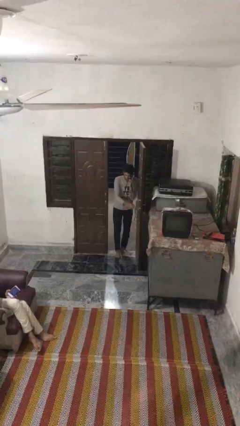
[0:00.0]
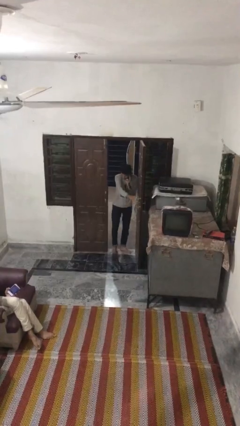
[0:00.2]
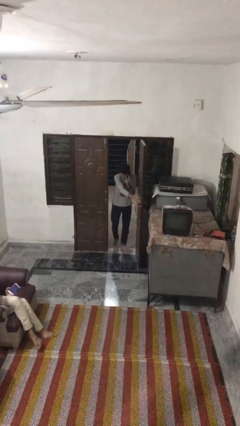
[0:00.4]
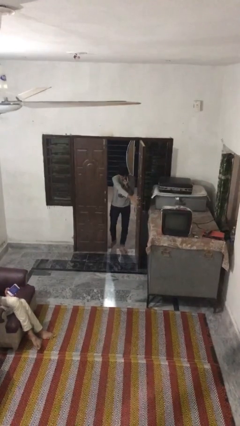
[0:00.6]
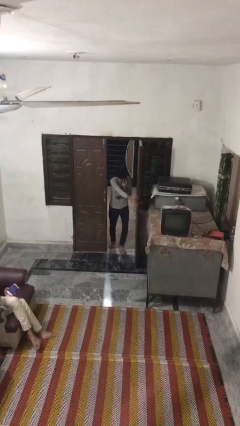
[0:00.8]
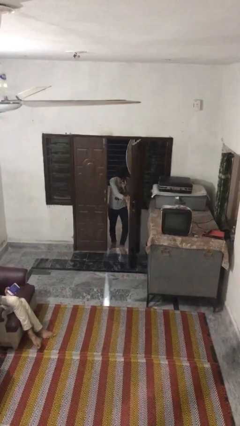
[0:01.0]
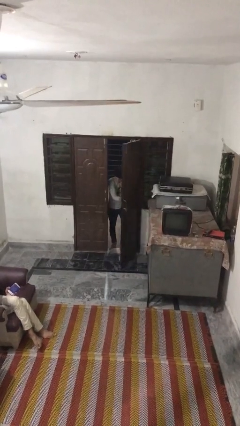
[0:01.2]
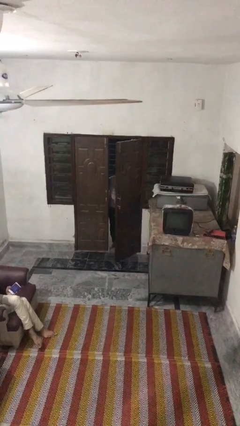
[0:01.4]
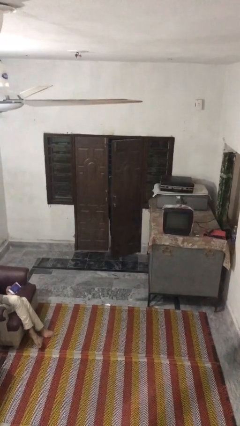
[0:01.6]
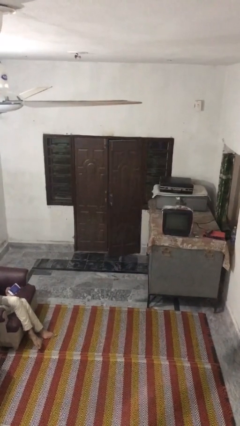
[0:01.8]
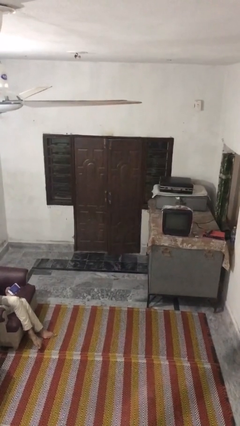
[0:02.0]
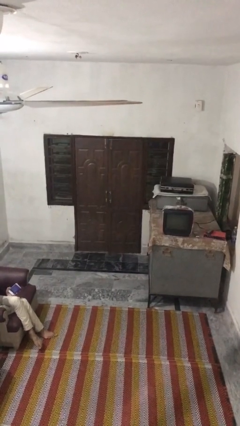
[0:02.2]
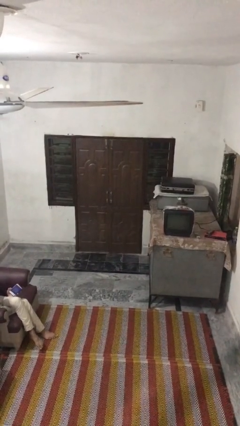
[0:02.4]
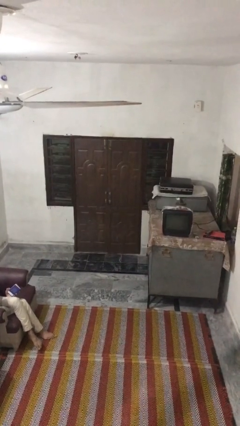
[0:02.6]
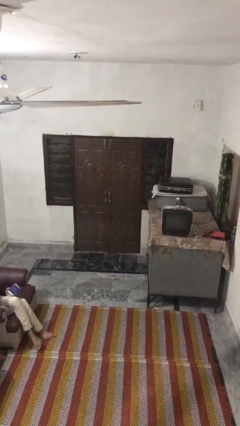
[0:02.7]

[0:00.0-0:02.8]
person closes facility door

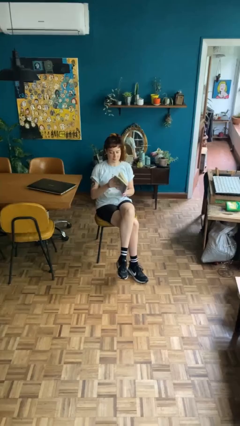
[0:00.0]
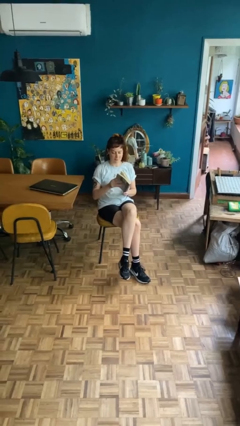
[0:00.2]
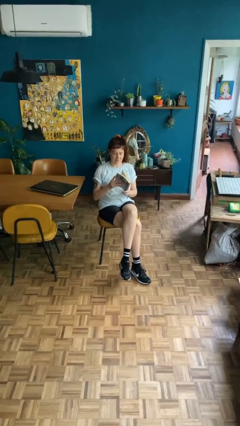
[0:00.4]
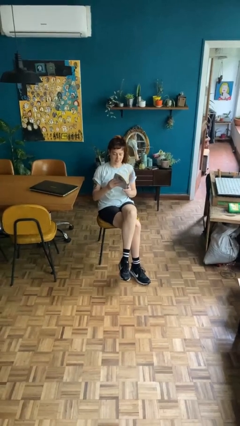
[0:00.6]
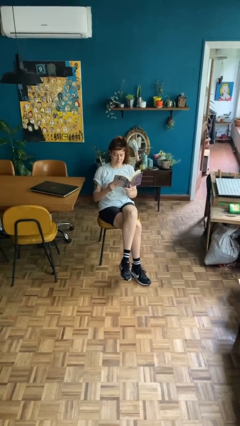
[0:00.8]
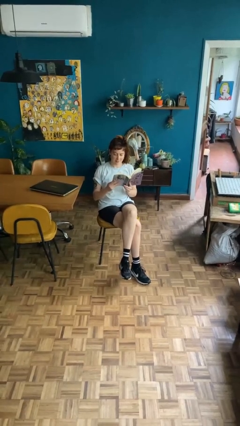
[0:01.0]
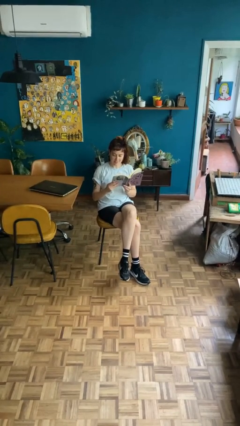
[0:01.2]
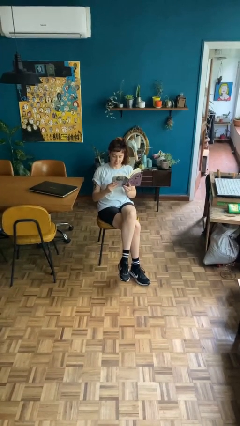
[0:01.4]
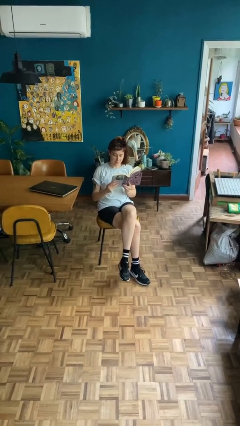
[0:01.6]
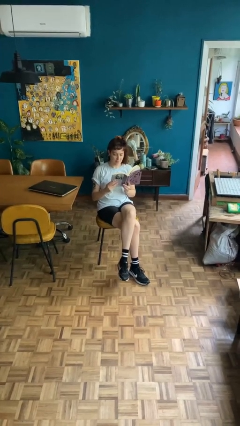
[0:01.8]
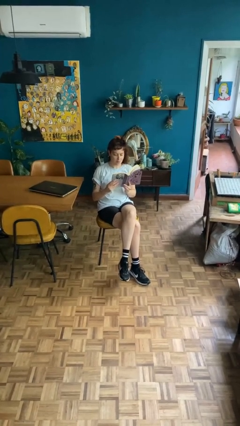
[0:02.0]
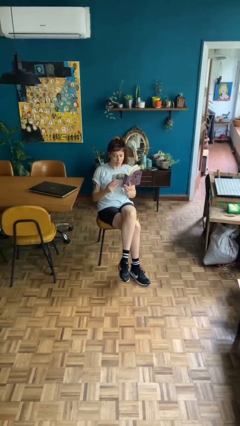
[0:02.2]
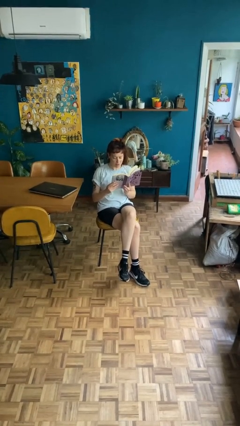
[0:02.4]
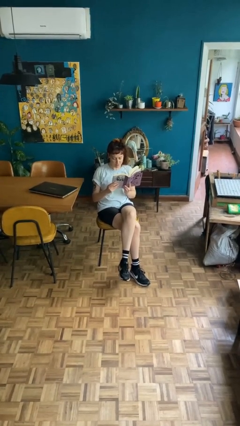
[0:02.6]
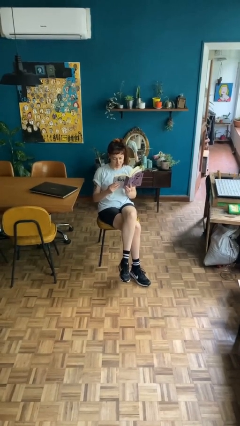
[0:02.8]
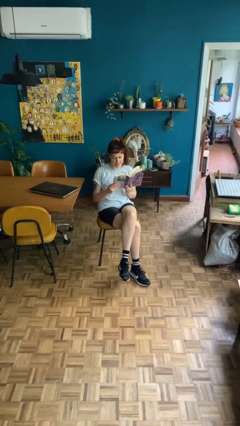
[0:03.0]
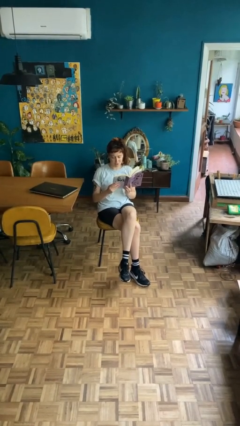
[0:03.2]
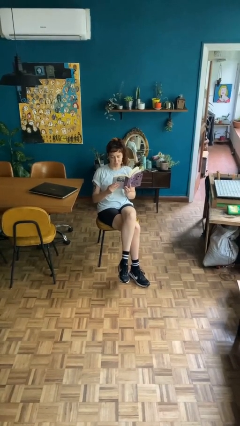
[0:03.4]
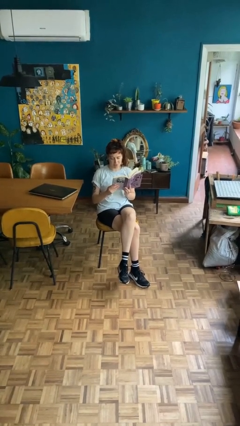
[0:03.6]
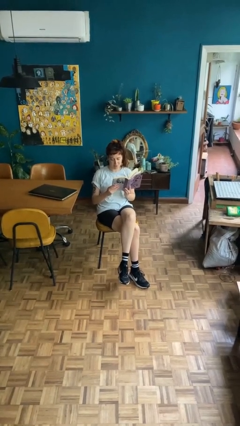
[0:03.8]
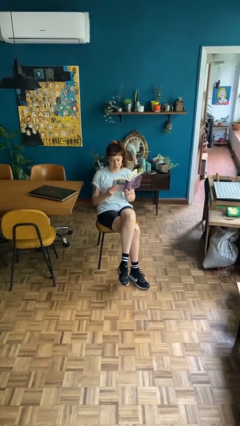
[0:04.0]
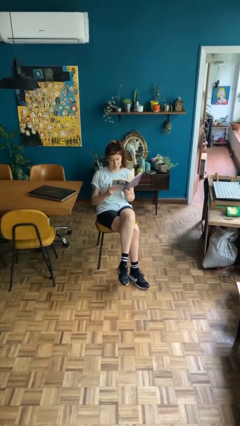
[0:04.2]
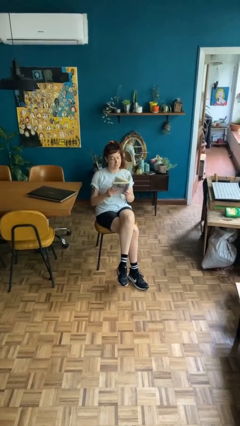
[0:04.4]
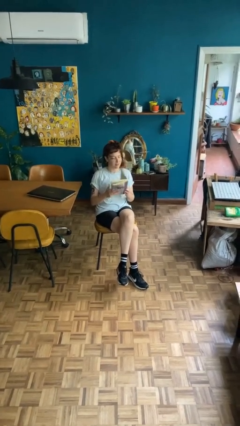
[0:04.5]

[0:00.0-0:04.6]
person reads document

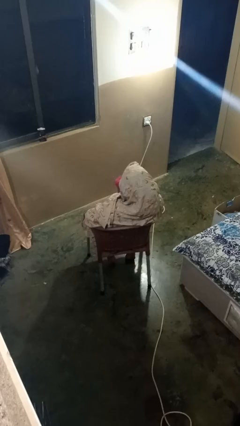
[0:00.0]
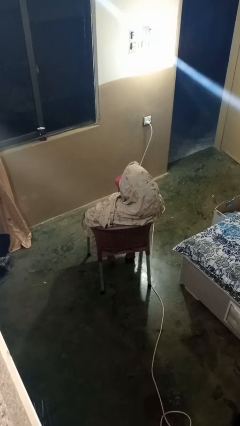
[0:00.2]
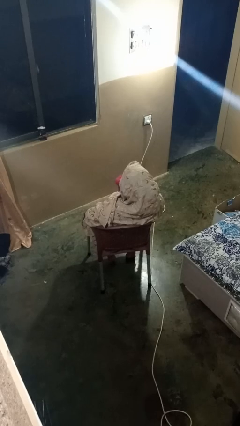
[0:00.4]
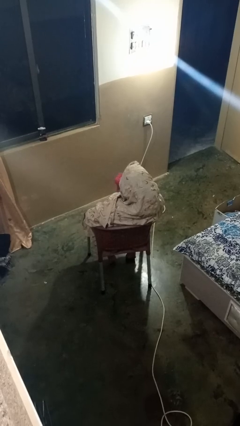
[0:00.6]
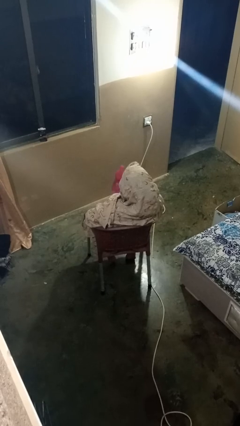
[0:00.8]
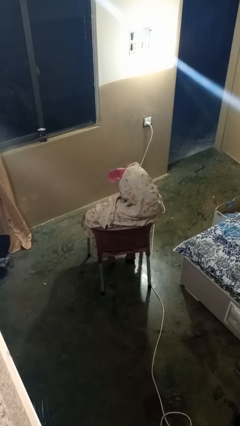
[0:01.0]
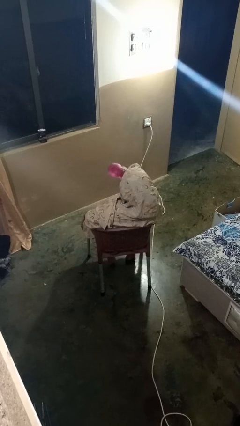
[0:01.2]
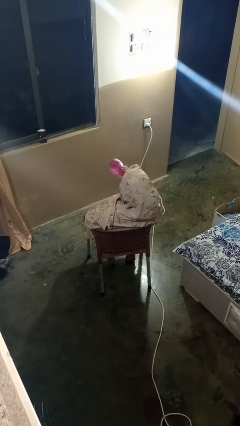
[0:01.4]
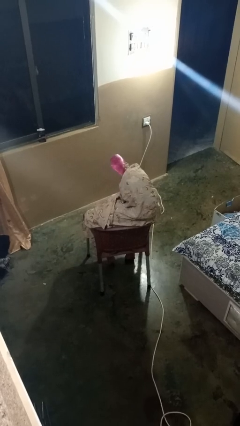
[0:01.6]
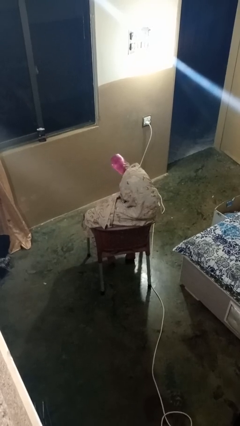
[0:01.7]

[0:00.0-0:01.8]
person drinks from bottle

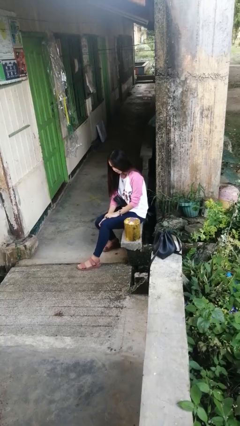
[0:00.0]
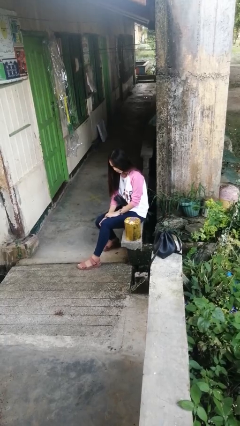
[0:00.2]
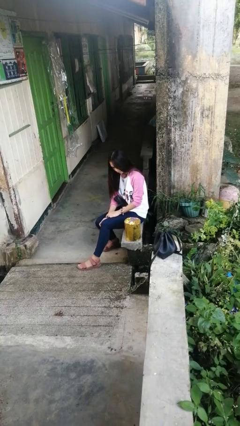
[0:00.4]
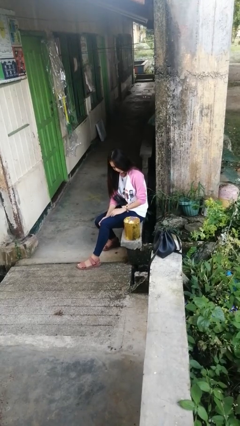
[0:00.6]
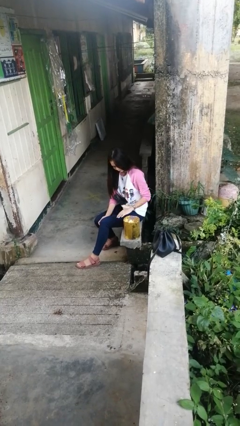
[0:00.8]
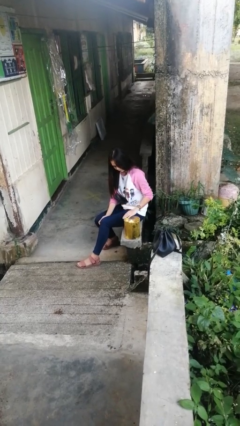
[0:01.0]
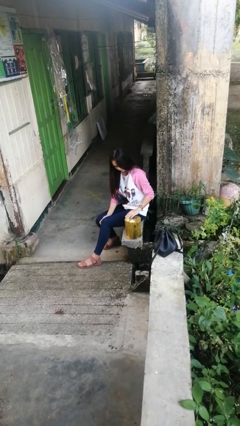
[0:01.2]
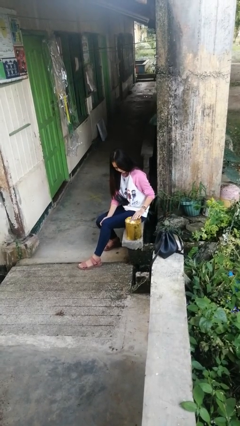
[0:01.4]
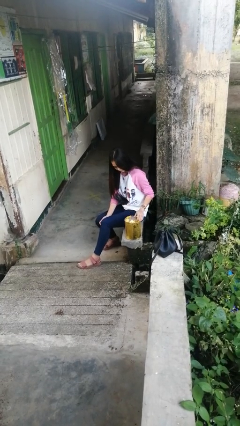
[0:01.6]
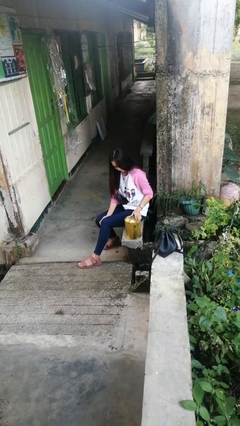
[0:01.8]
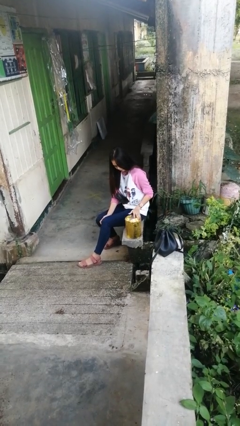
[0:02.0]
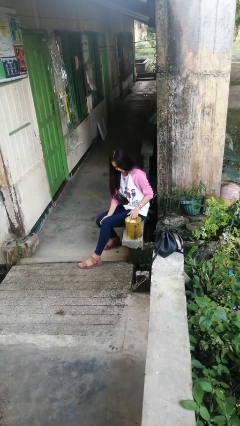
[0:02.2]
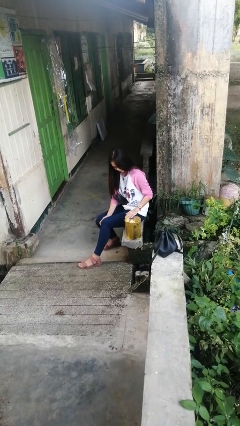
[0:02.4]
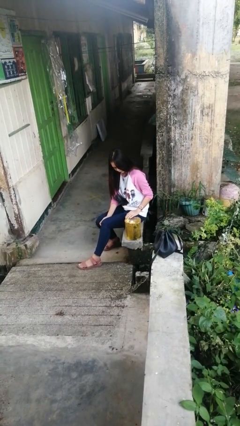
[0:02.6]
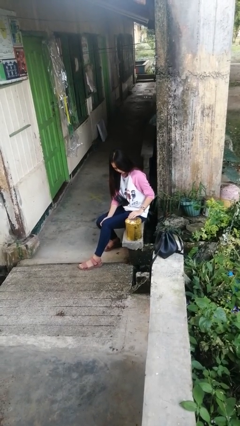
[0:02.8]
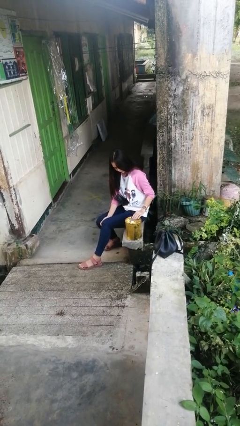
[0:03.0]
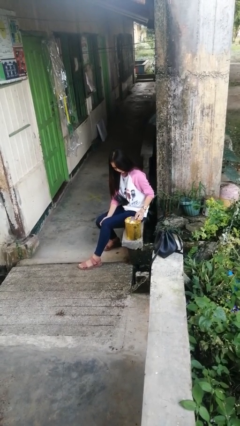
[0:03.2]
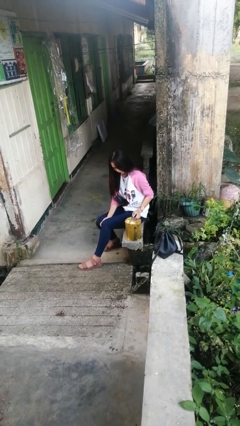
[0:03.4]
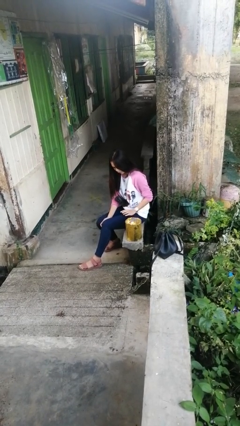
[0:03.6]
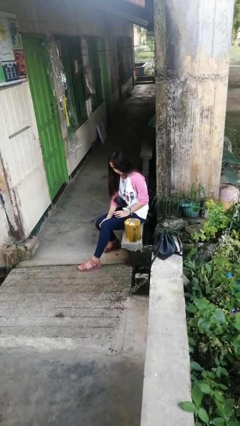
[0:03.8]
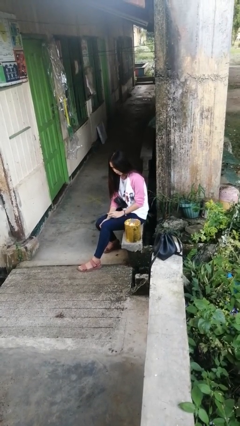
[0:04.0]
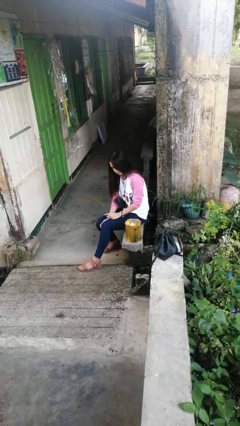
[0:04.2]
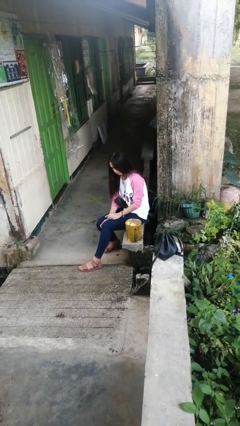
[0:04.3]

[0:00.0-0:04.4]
person waves hand over object

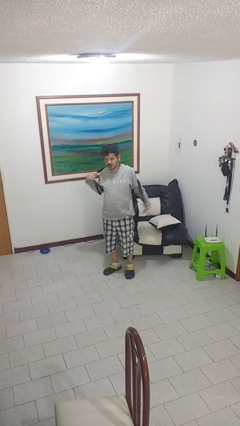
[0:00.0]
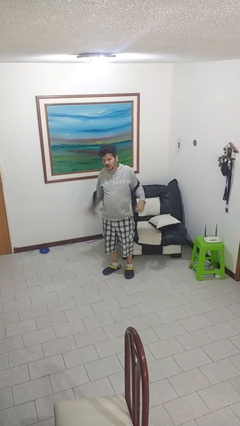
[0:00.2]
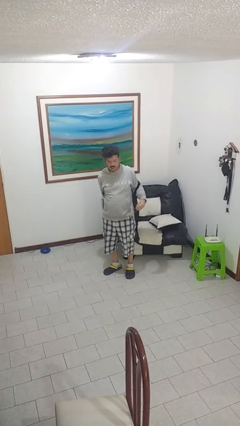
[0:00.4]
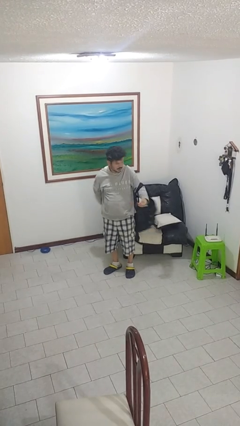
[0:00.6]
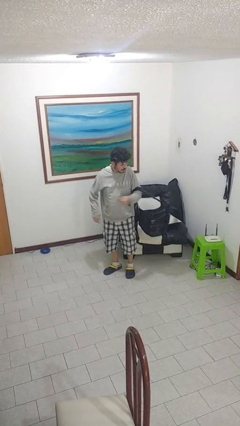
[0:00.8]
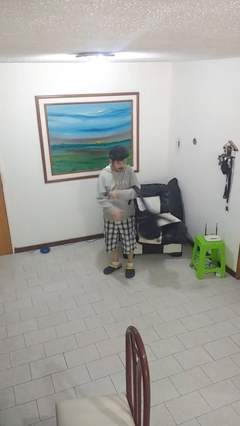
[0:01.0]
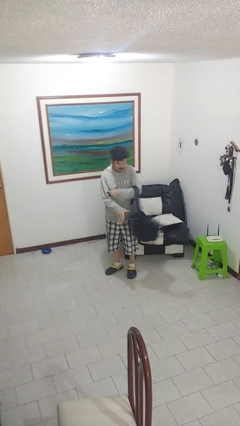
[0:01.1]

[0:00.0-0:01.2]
person takes off backpack

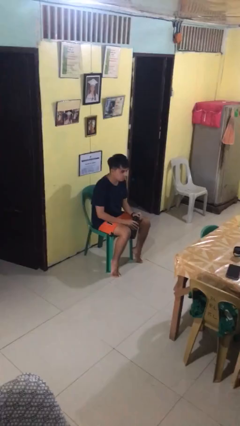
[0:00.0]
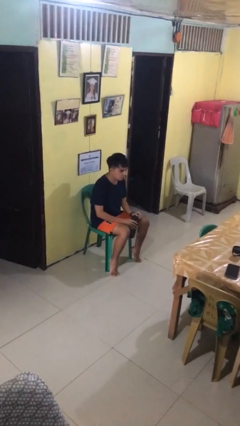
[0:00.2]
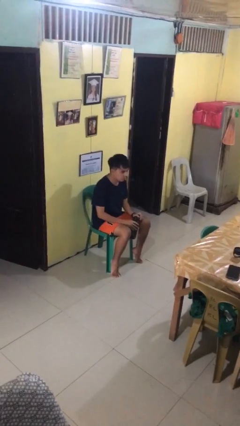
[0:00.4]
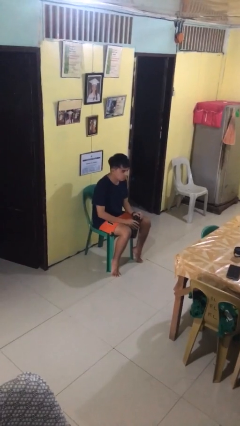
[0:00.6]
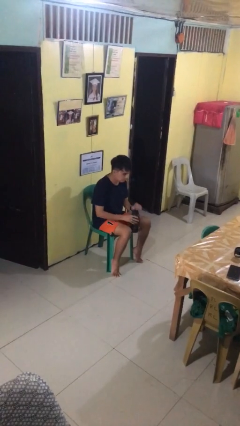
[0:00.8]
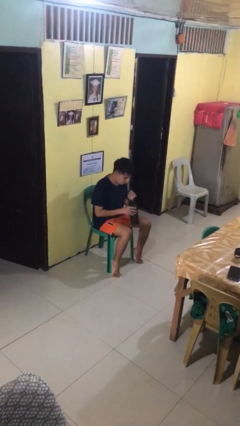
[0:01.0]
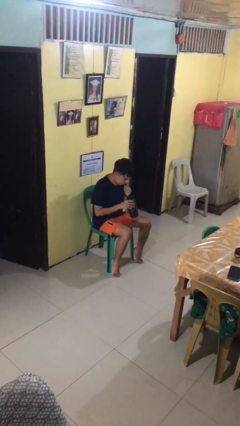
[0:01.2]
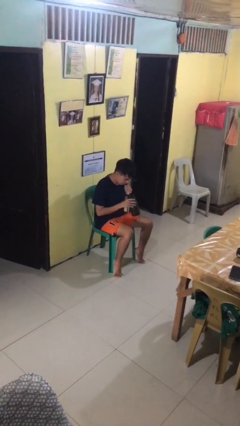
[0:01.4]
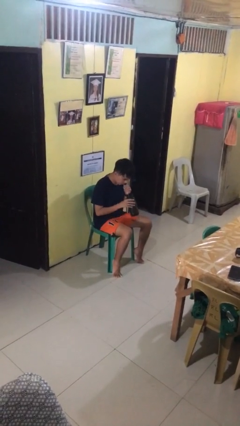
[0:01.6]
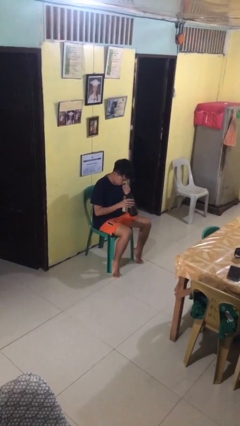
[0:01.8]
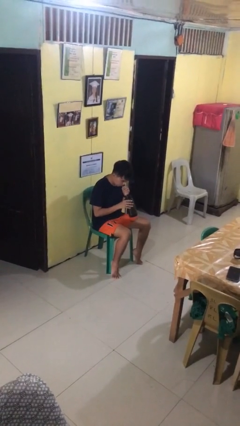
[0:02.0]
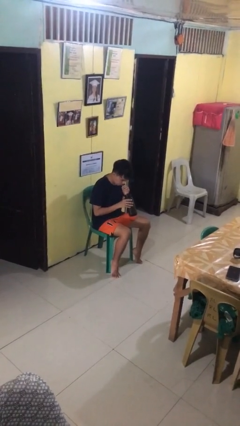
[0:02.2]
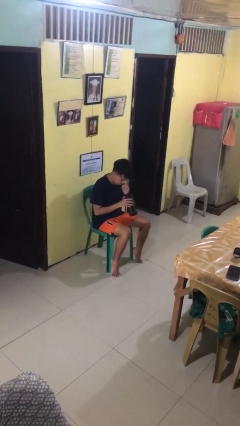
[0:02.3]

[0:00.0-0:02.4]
person drinks from straw

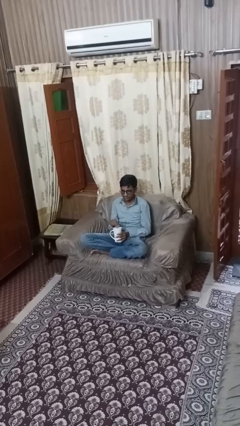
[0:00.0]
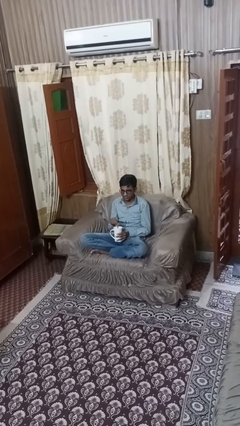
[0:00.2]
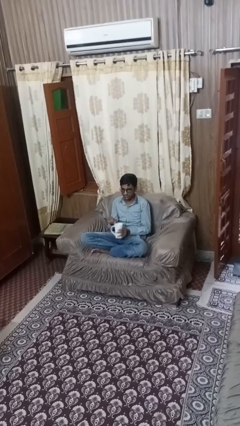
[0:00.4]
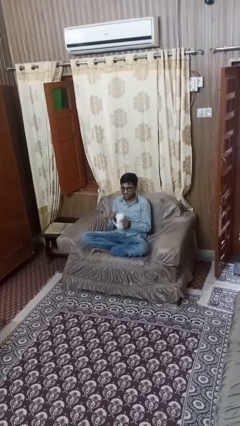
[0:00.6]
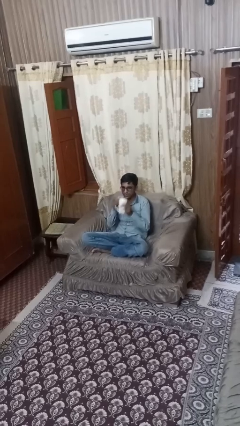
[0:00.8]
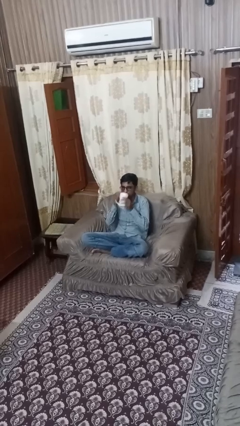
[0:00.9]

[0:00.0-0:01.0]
person stirs mug
